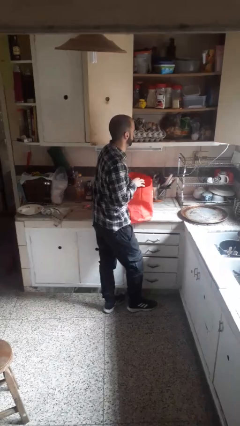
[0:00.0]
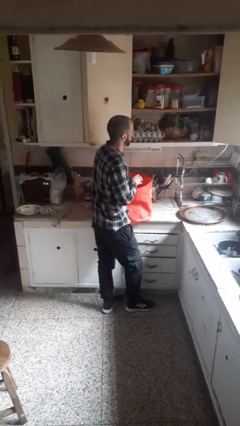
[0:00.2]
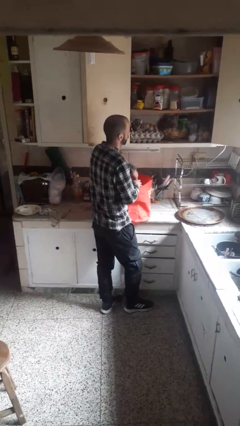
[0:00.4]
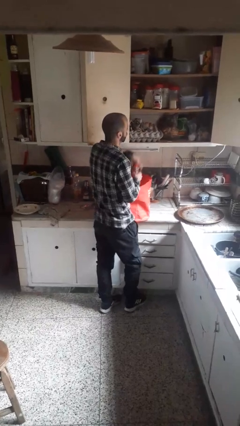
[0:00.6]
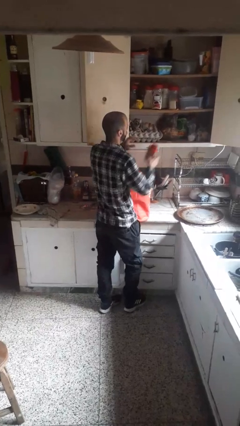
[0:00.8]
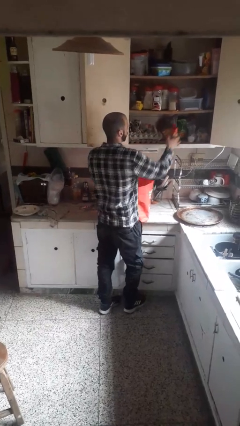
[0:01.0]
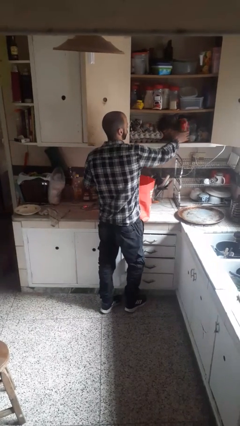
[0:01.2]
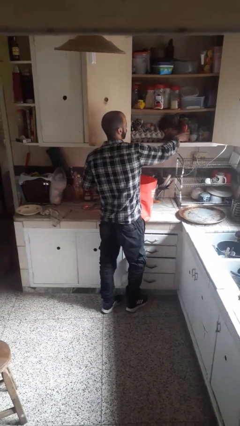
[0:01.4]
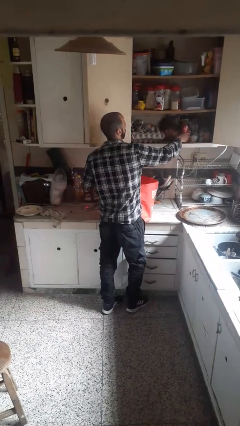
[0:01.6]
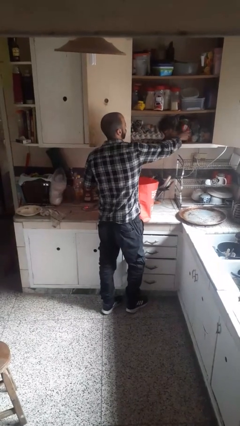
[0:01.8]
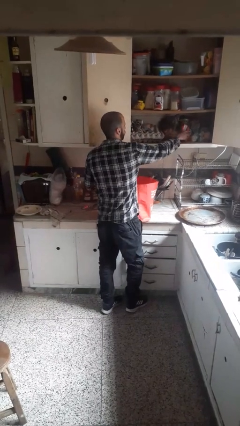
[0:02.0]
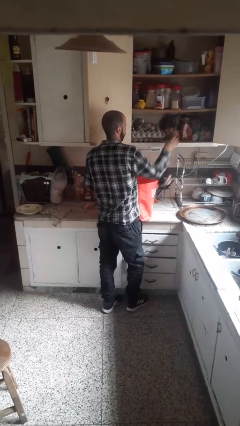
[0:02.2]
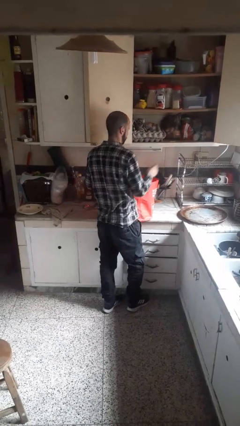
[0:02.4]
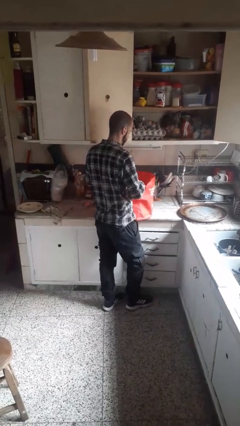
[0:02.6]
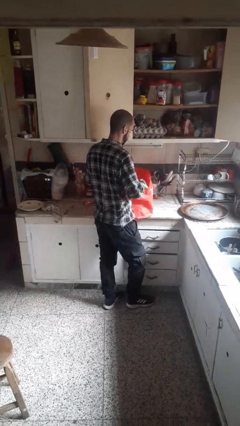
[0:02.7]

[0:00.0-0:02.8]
person loads groceries into cabinet

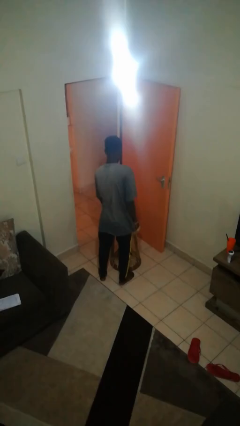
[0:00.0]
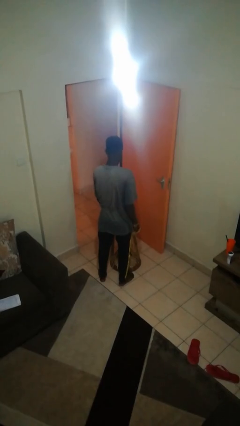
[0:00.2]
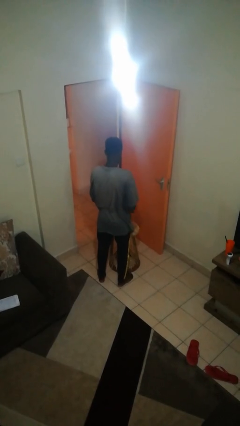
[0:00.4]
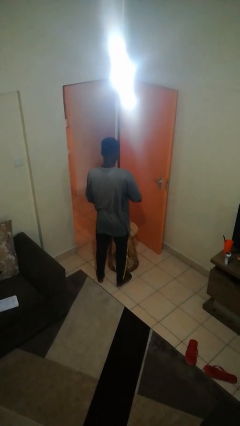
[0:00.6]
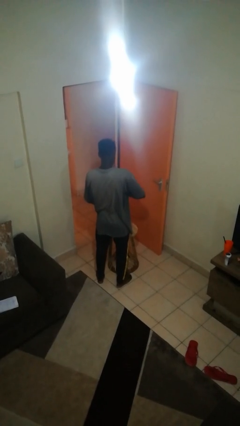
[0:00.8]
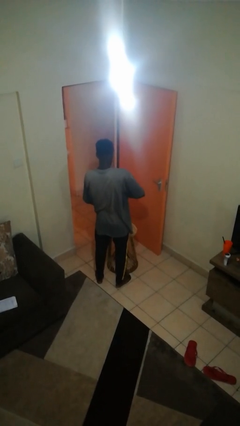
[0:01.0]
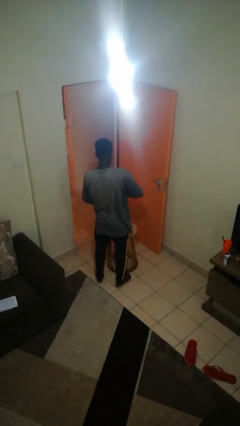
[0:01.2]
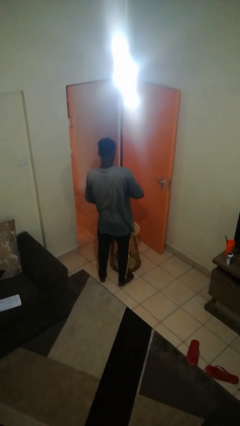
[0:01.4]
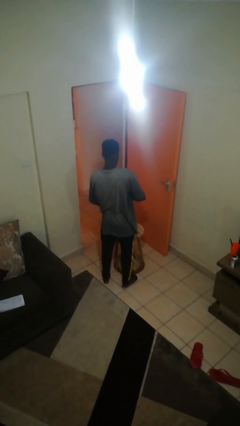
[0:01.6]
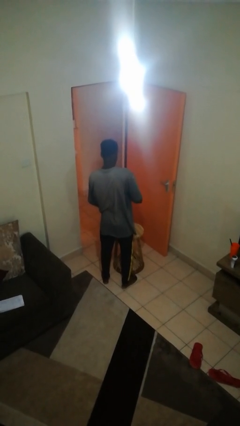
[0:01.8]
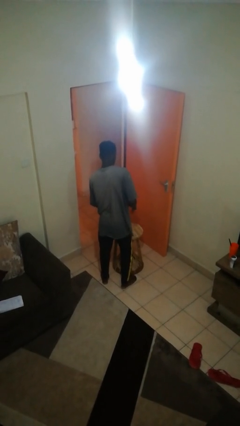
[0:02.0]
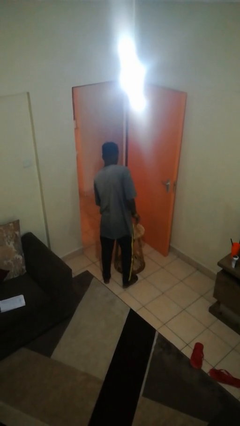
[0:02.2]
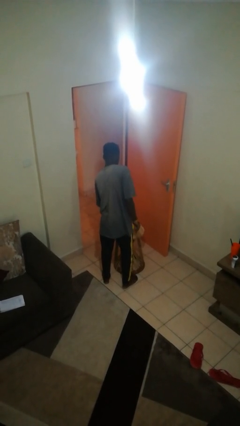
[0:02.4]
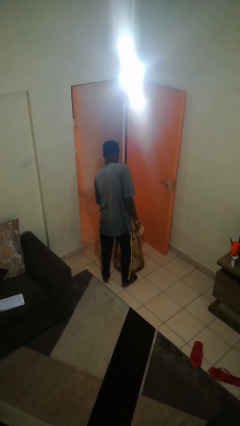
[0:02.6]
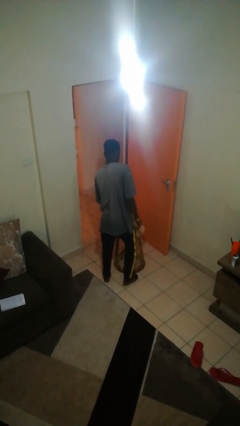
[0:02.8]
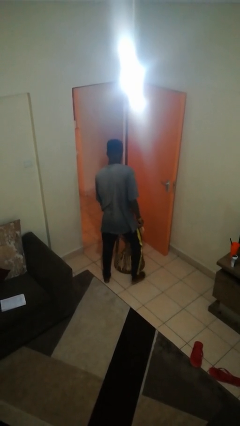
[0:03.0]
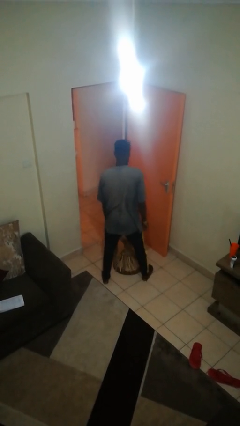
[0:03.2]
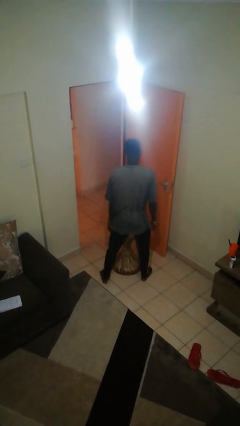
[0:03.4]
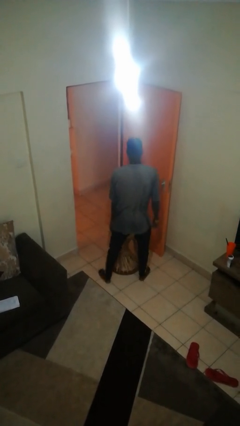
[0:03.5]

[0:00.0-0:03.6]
person screws lid to bottle

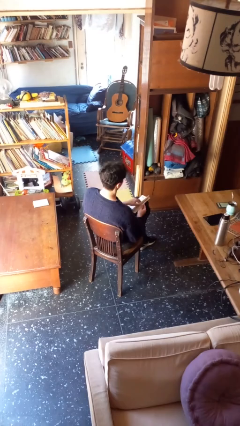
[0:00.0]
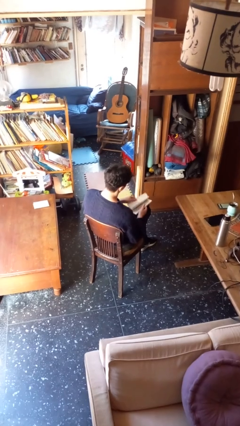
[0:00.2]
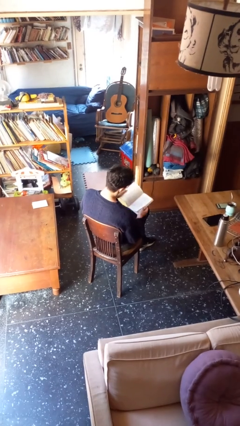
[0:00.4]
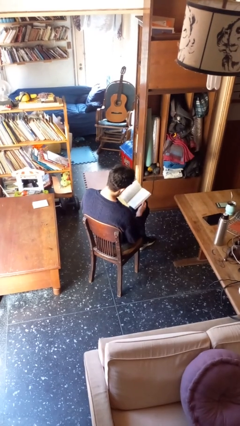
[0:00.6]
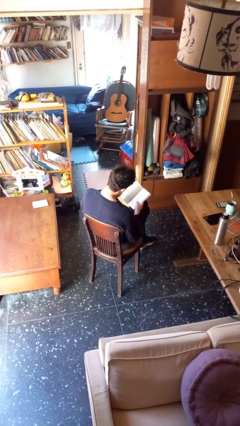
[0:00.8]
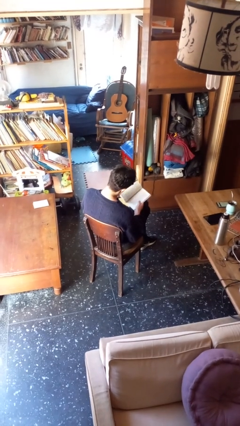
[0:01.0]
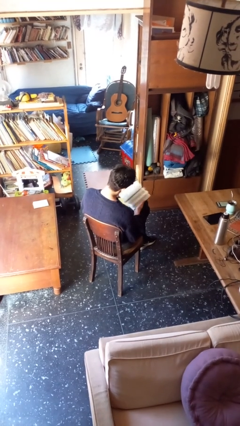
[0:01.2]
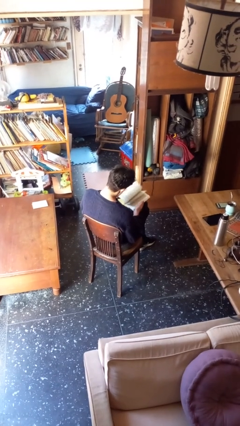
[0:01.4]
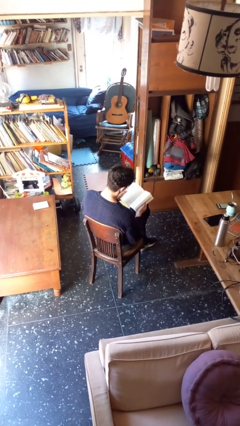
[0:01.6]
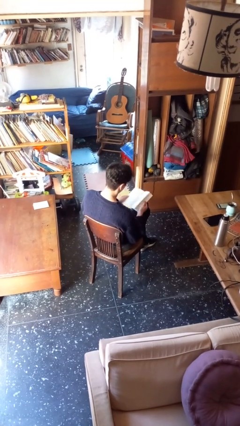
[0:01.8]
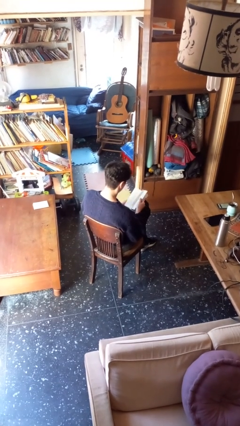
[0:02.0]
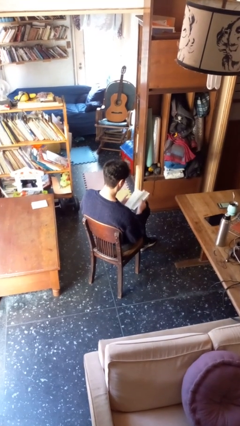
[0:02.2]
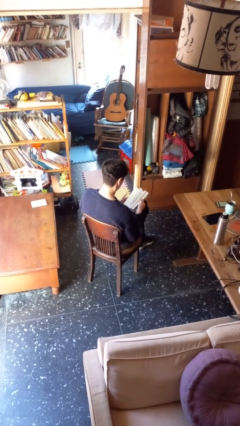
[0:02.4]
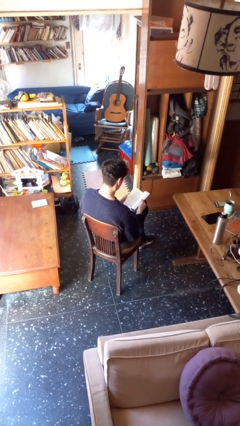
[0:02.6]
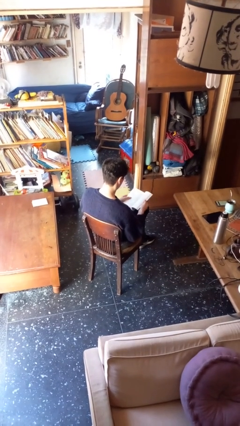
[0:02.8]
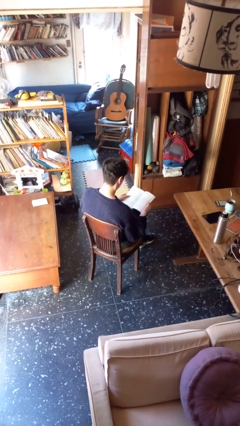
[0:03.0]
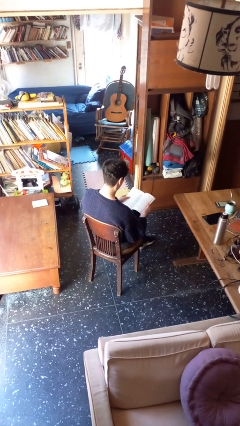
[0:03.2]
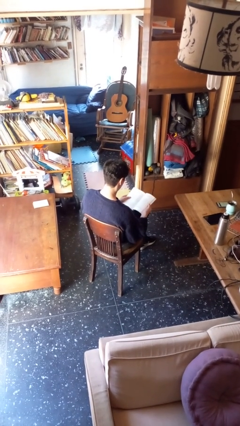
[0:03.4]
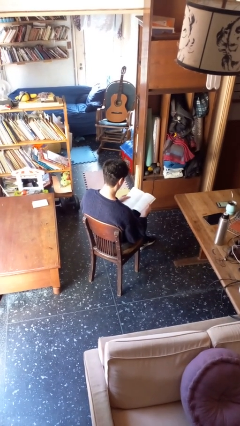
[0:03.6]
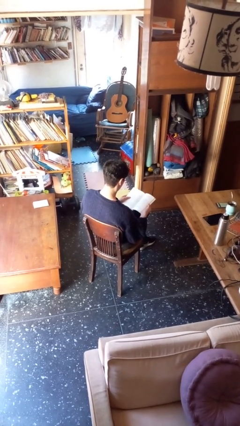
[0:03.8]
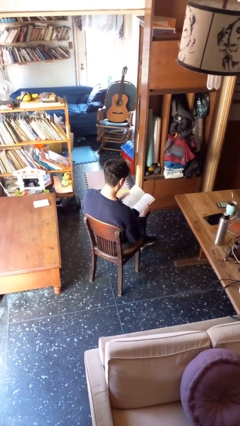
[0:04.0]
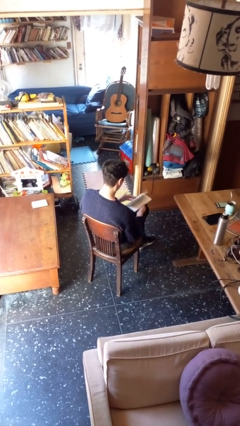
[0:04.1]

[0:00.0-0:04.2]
person reads book

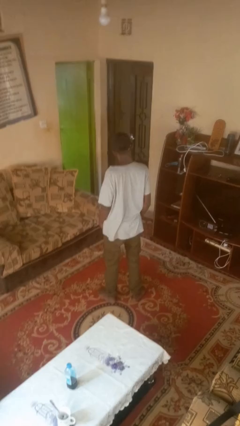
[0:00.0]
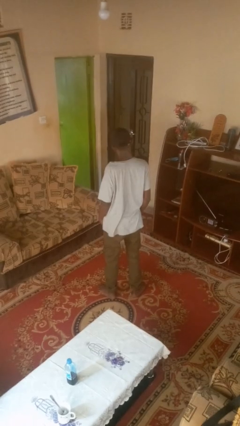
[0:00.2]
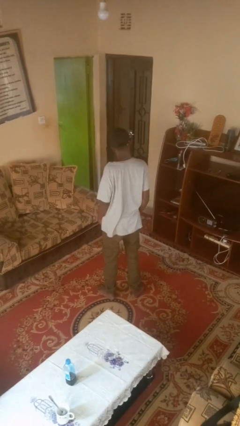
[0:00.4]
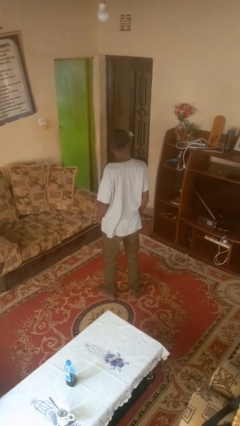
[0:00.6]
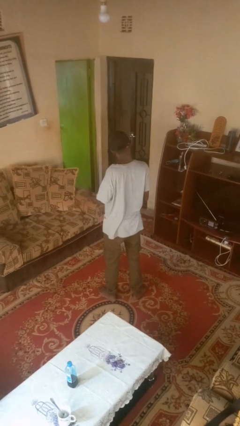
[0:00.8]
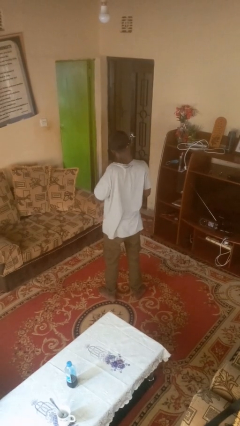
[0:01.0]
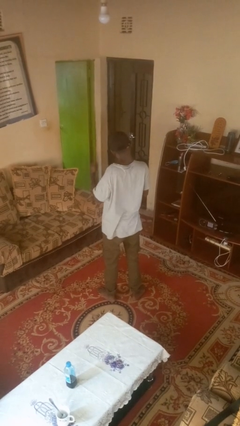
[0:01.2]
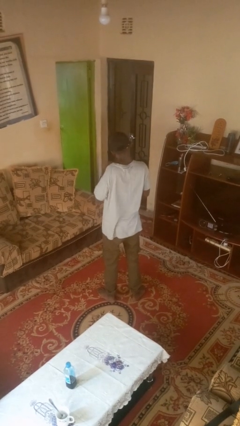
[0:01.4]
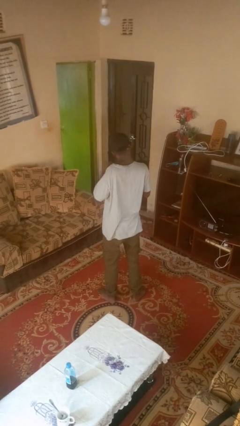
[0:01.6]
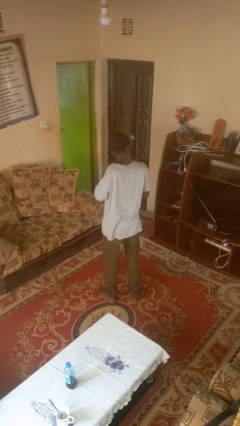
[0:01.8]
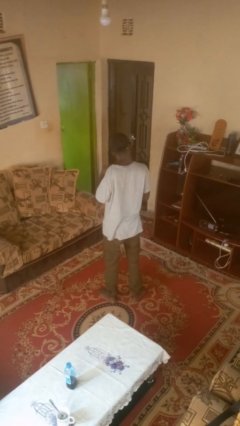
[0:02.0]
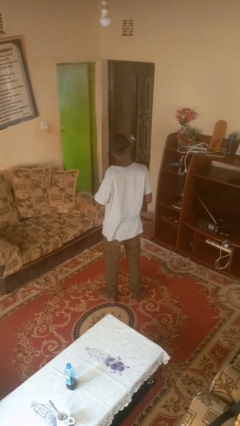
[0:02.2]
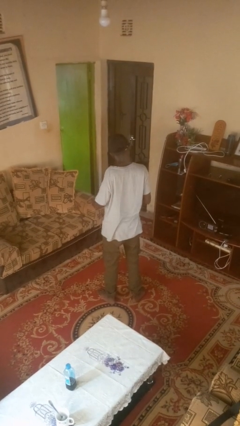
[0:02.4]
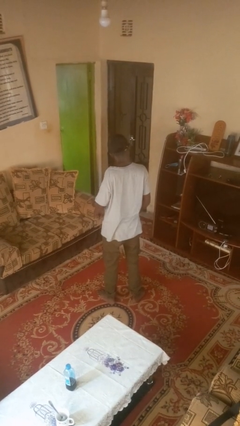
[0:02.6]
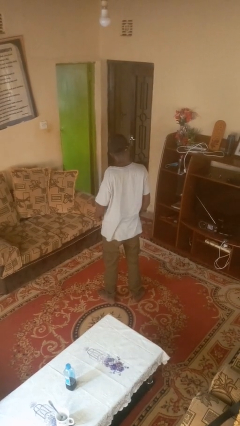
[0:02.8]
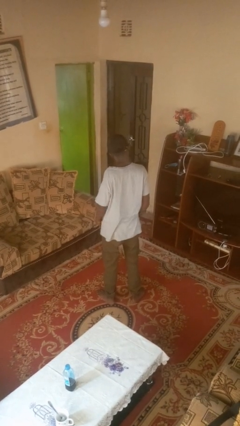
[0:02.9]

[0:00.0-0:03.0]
person drums on chest

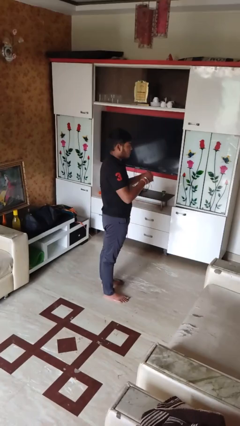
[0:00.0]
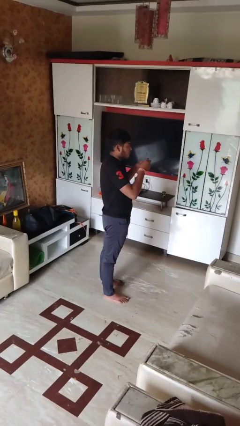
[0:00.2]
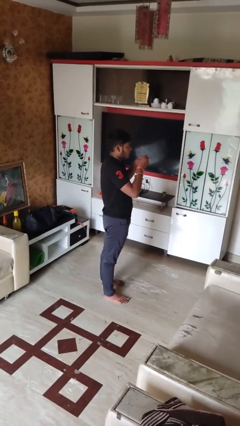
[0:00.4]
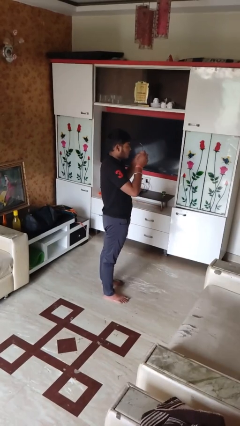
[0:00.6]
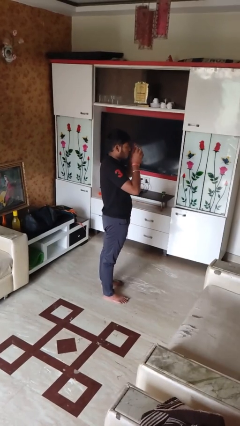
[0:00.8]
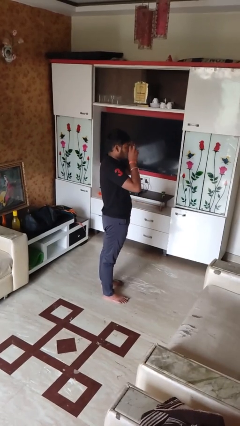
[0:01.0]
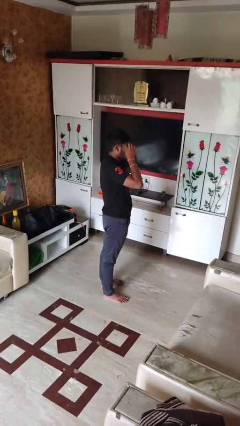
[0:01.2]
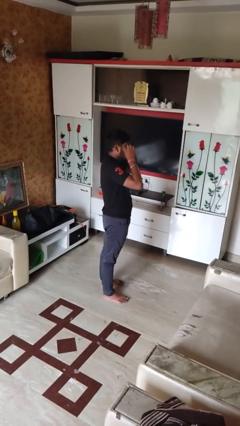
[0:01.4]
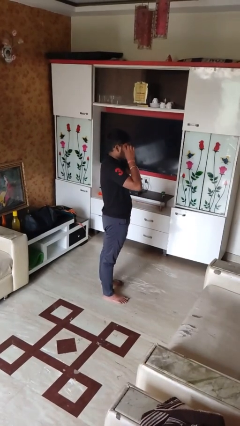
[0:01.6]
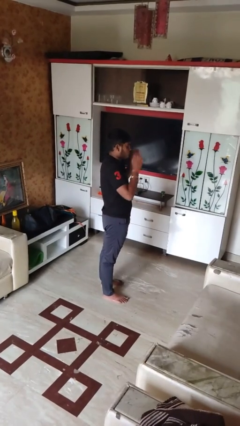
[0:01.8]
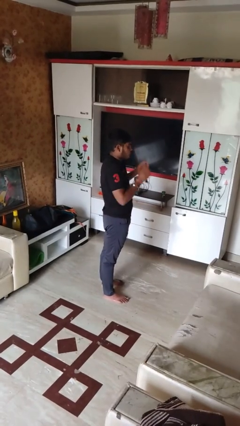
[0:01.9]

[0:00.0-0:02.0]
person puts on sunglasses

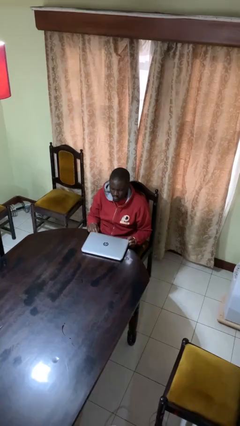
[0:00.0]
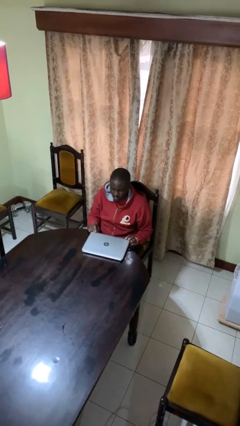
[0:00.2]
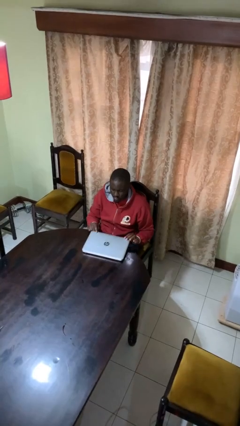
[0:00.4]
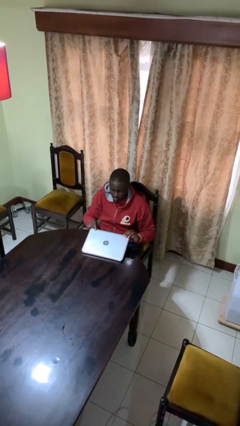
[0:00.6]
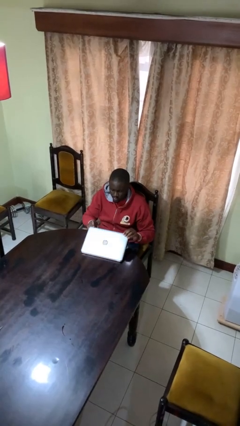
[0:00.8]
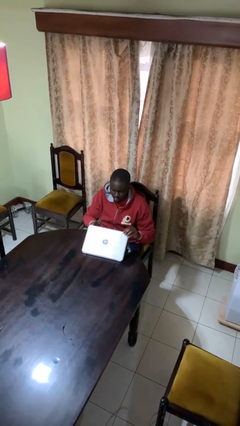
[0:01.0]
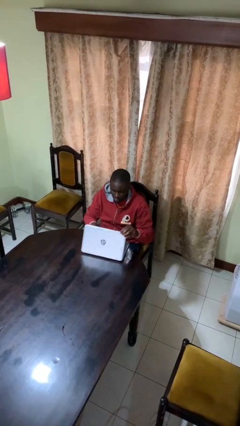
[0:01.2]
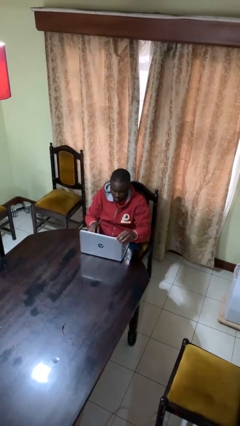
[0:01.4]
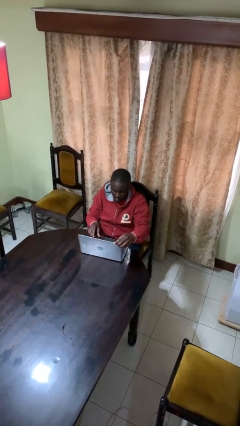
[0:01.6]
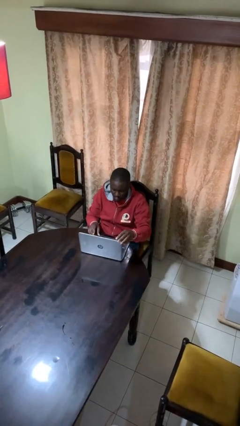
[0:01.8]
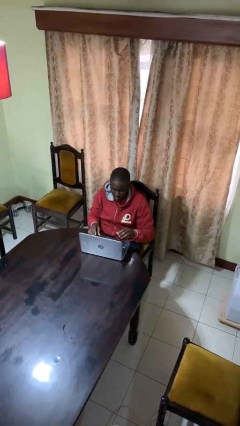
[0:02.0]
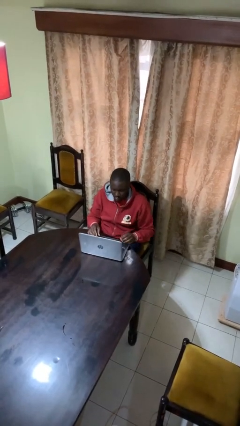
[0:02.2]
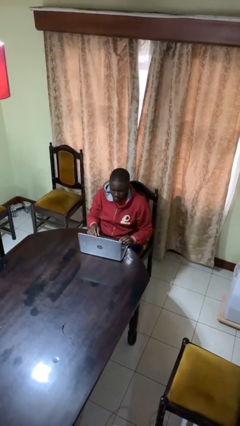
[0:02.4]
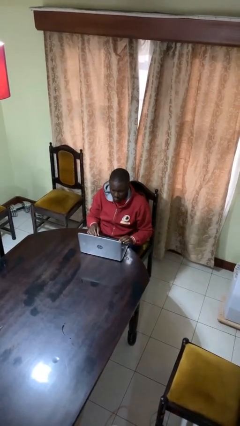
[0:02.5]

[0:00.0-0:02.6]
person opens laptop
